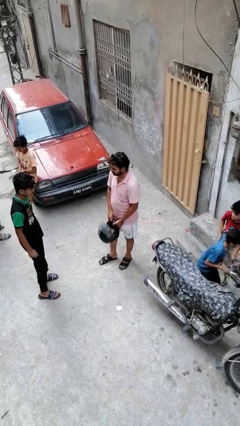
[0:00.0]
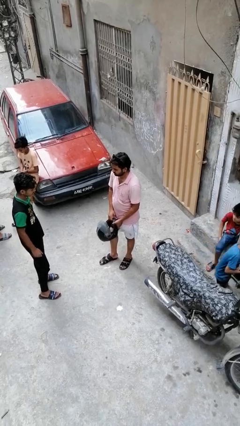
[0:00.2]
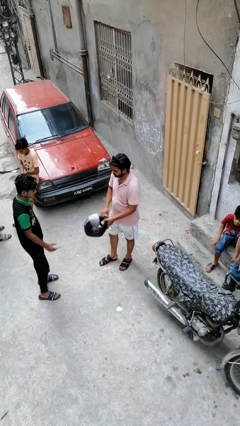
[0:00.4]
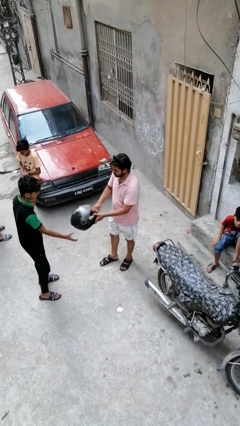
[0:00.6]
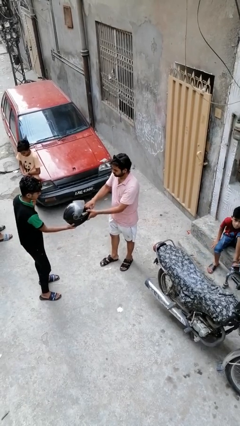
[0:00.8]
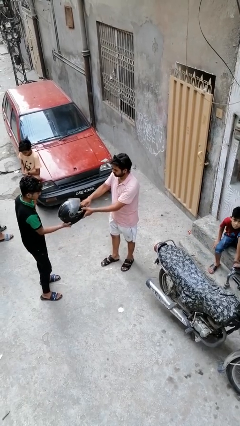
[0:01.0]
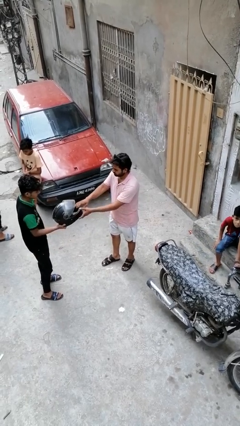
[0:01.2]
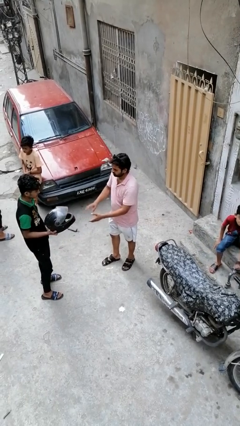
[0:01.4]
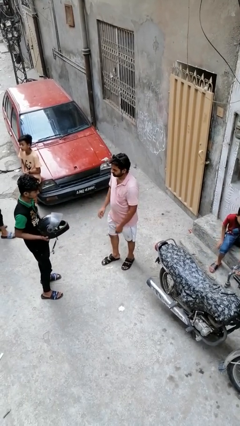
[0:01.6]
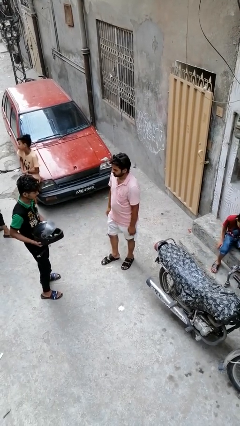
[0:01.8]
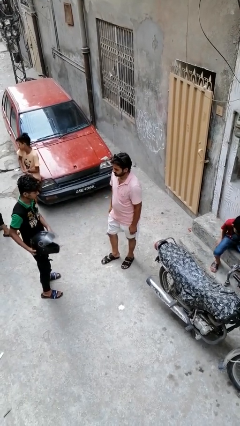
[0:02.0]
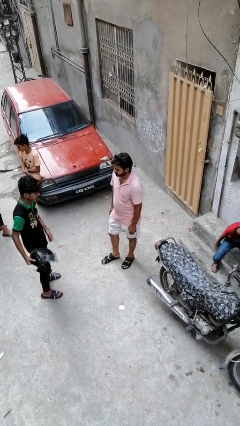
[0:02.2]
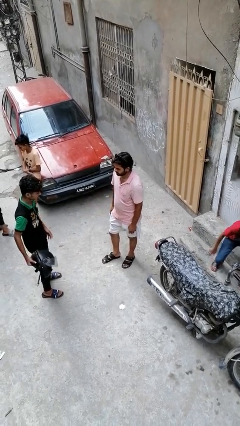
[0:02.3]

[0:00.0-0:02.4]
person transfers object to person

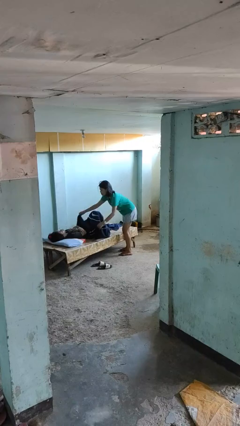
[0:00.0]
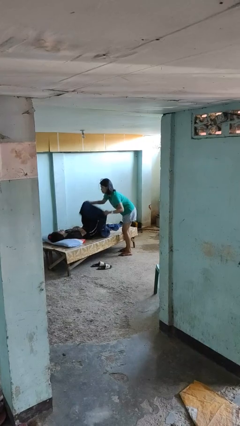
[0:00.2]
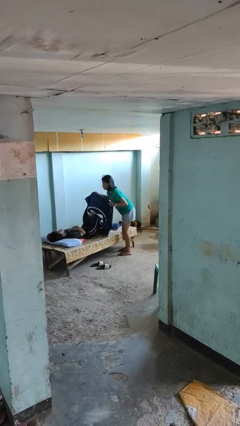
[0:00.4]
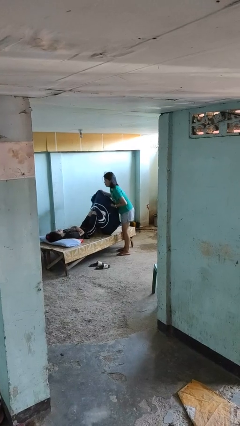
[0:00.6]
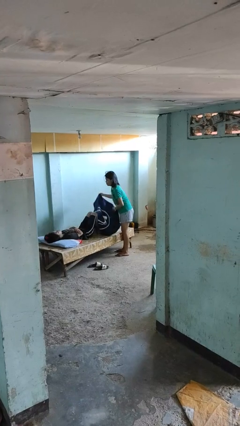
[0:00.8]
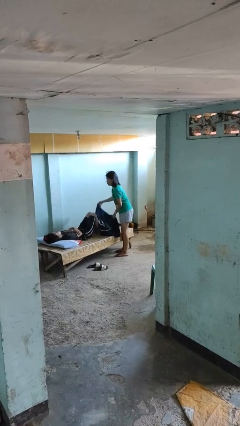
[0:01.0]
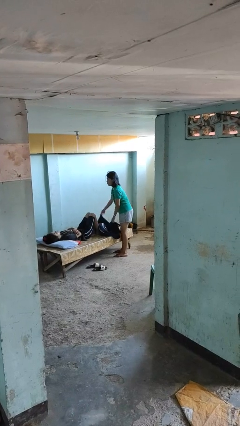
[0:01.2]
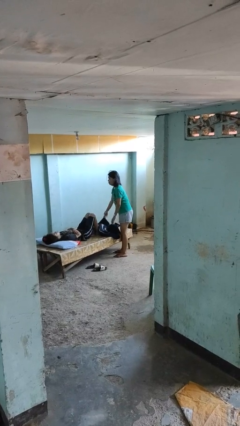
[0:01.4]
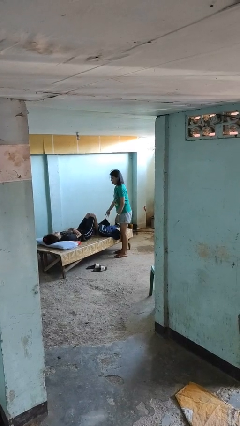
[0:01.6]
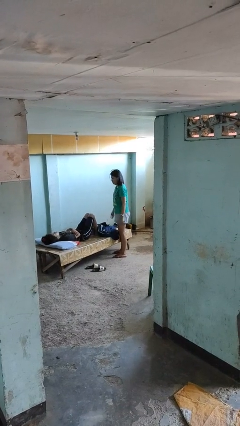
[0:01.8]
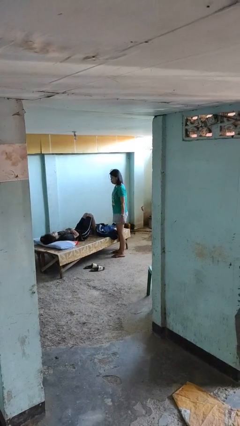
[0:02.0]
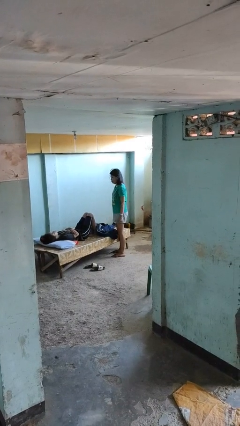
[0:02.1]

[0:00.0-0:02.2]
person uncovers friend with blanket

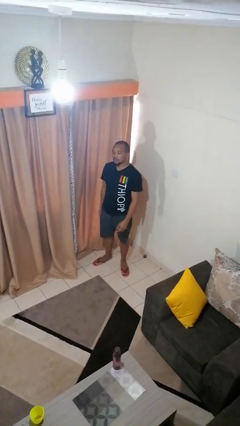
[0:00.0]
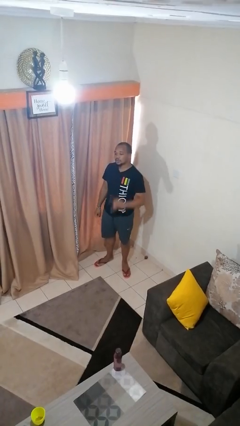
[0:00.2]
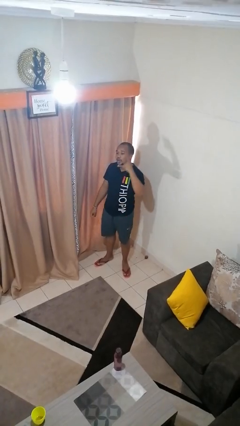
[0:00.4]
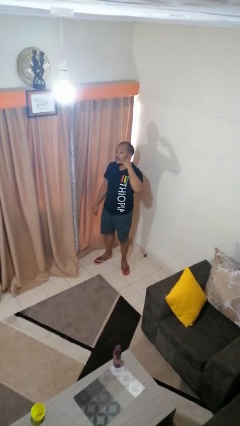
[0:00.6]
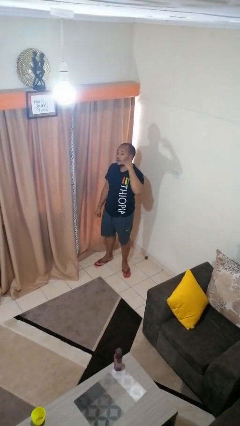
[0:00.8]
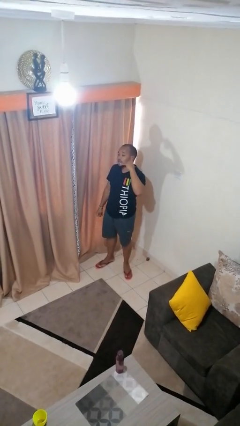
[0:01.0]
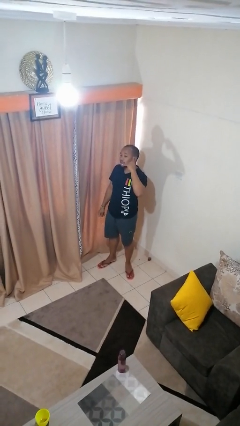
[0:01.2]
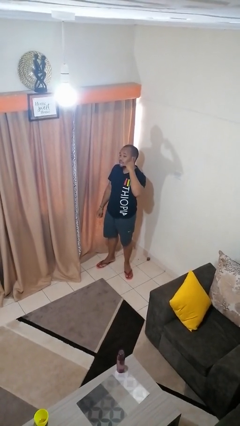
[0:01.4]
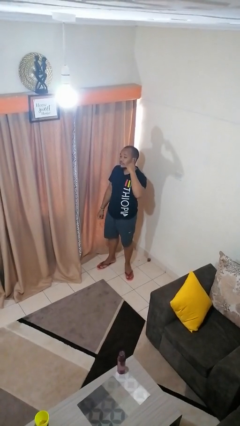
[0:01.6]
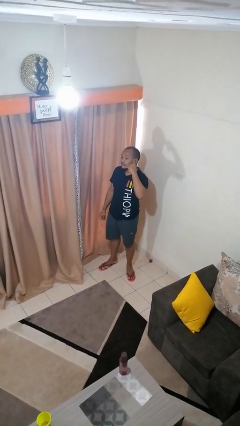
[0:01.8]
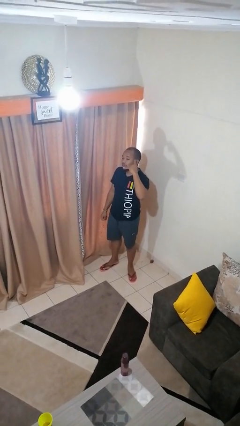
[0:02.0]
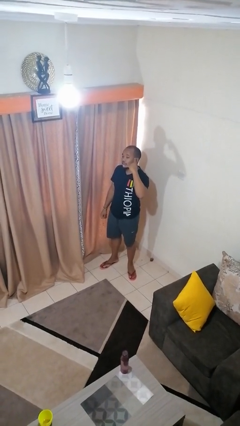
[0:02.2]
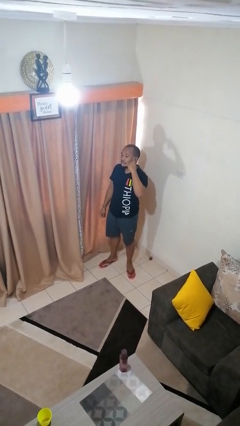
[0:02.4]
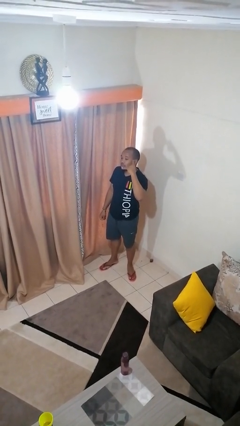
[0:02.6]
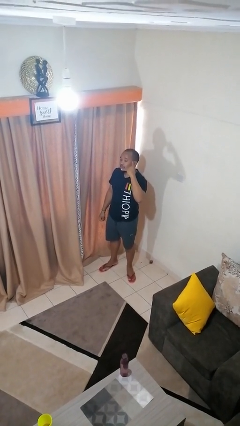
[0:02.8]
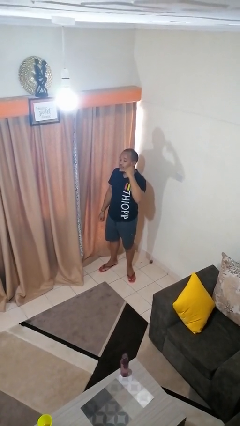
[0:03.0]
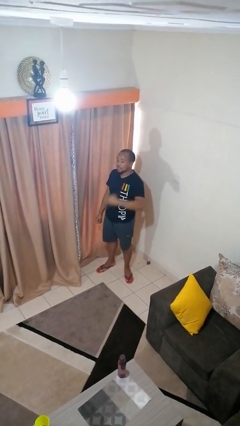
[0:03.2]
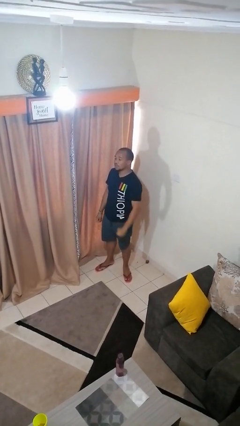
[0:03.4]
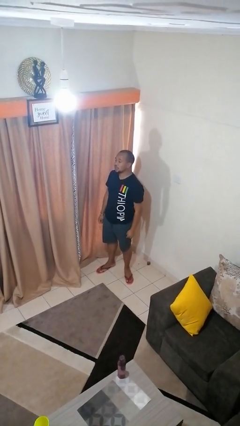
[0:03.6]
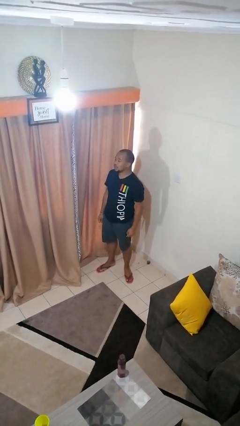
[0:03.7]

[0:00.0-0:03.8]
person gestures call me

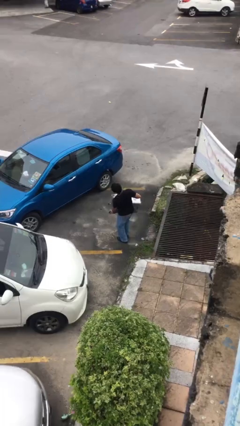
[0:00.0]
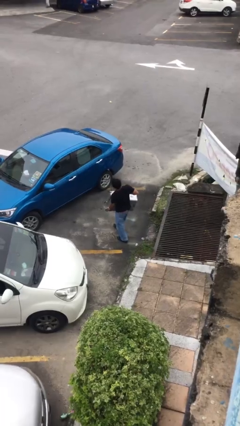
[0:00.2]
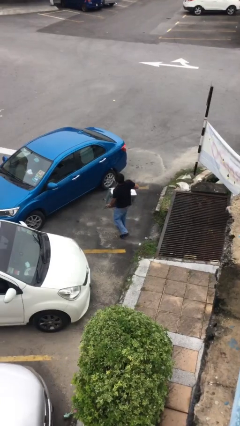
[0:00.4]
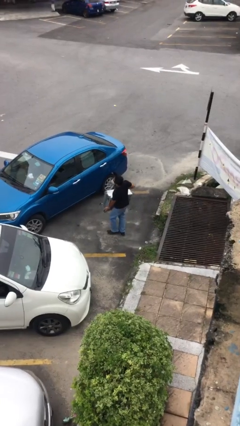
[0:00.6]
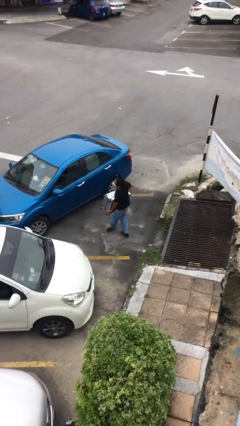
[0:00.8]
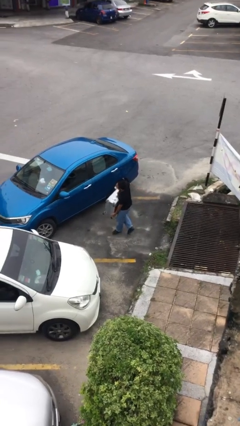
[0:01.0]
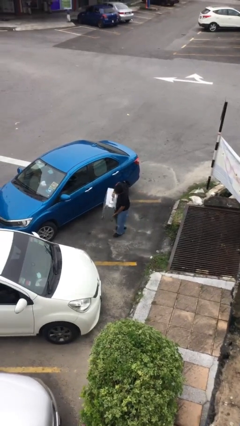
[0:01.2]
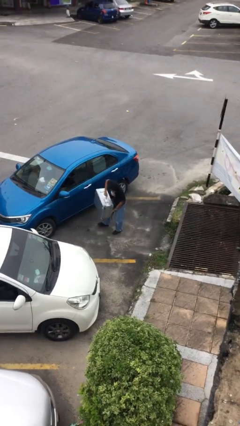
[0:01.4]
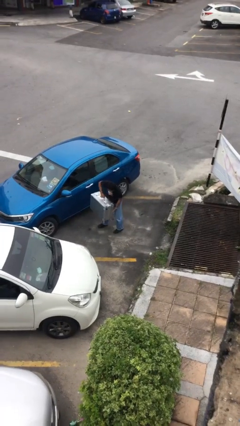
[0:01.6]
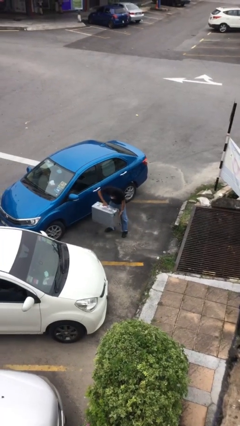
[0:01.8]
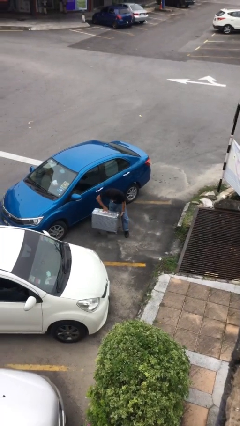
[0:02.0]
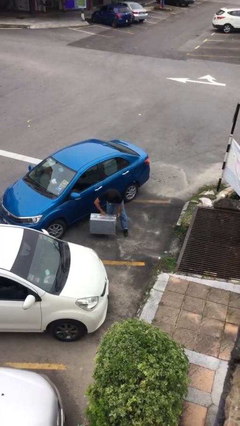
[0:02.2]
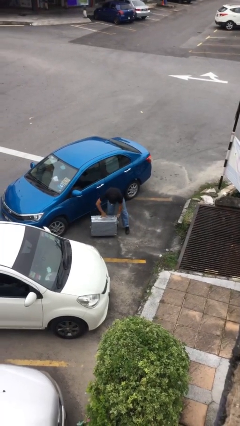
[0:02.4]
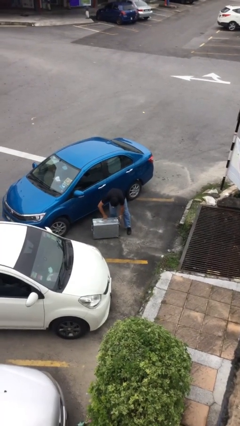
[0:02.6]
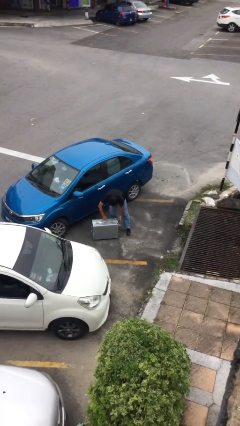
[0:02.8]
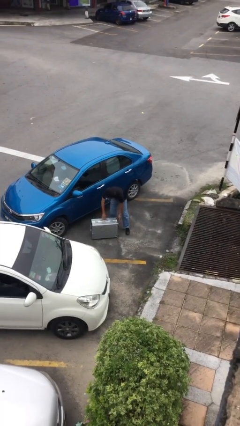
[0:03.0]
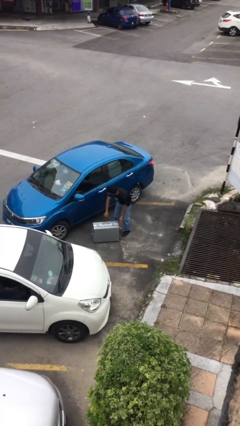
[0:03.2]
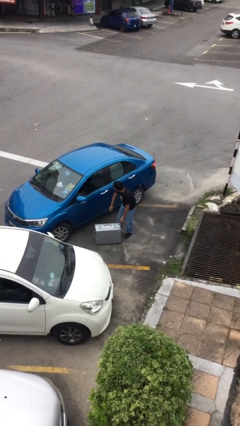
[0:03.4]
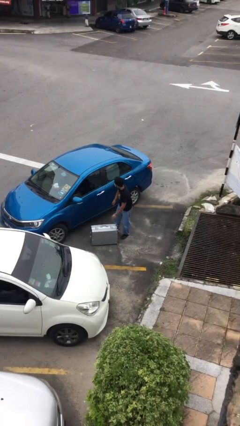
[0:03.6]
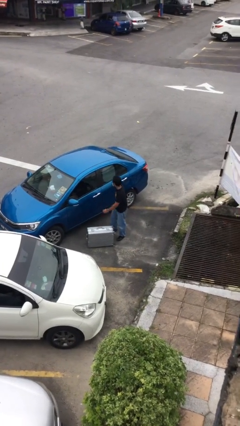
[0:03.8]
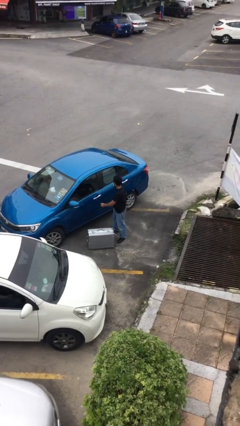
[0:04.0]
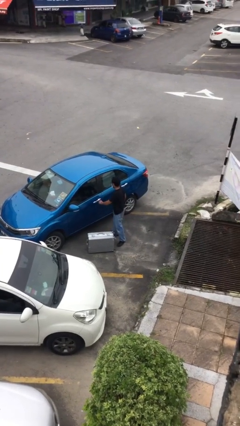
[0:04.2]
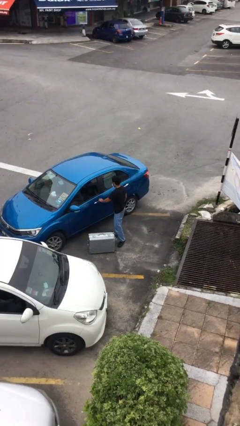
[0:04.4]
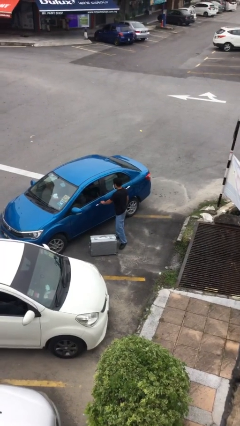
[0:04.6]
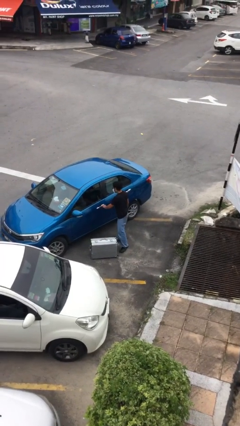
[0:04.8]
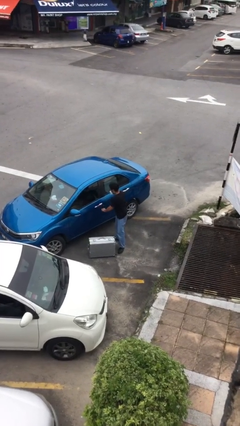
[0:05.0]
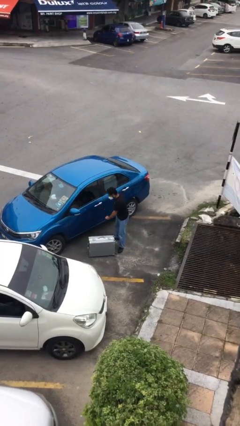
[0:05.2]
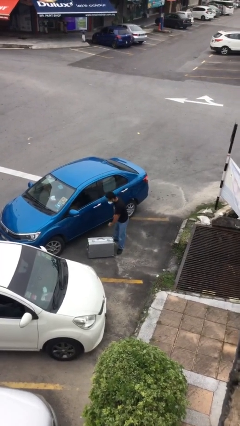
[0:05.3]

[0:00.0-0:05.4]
person puts down object on floor

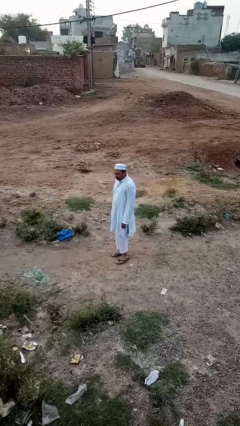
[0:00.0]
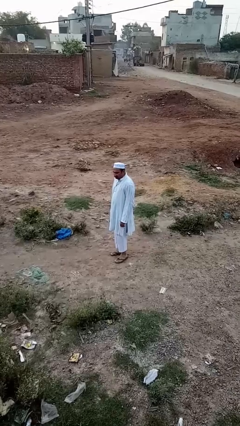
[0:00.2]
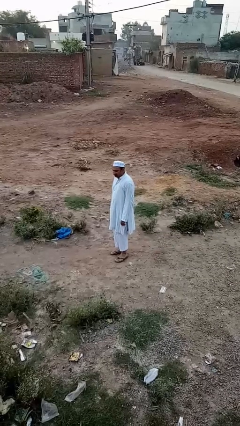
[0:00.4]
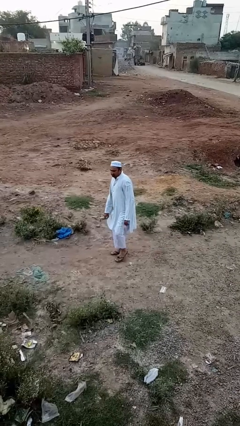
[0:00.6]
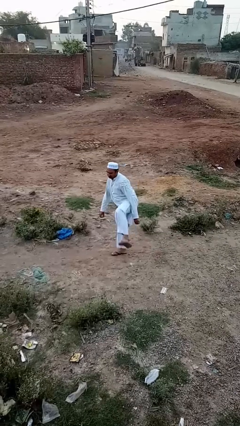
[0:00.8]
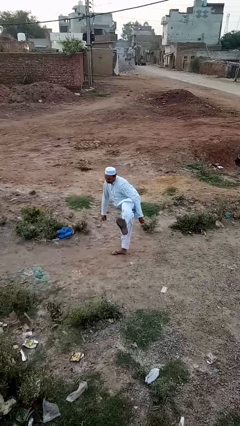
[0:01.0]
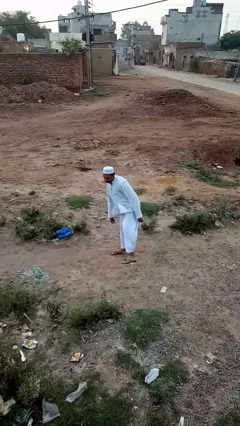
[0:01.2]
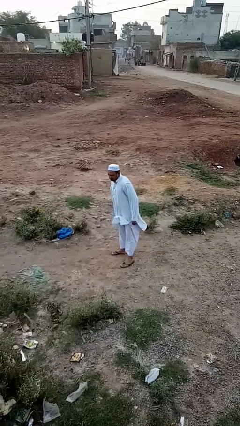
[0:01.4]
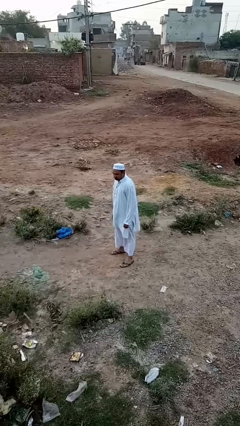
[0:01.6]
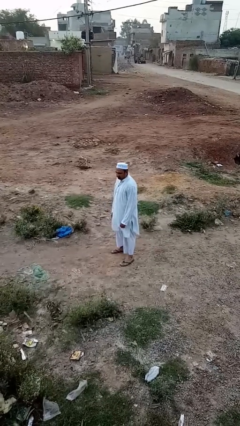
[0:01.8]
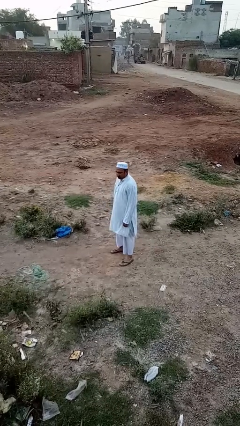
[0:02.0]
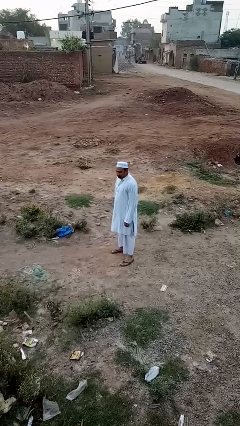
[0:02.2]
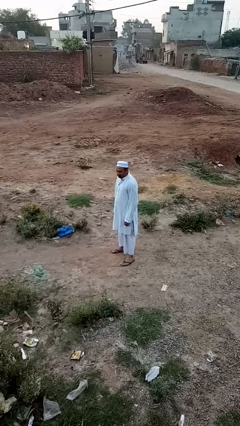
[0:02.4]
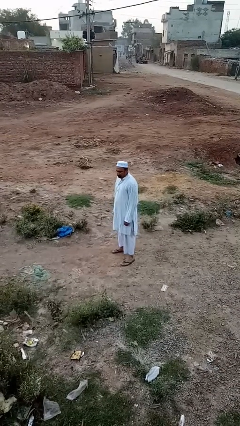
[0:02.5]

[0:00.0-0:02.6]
person karate kicks

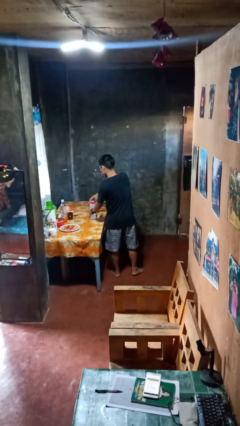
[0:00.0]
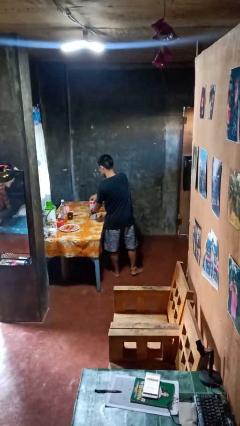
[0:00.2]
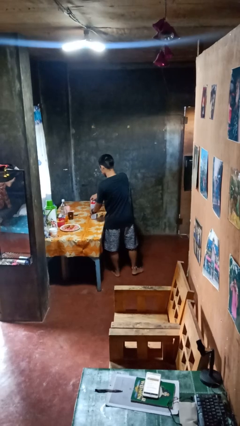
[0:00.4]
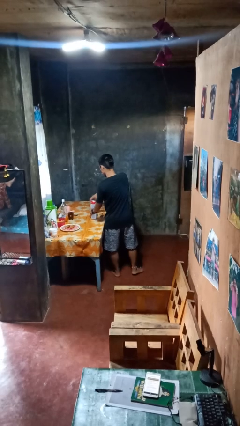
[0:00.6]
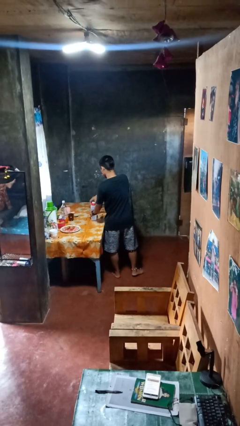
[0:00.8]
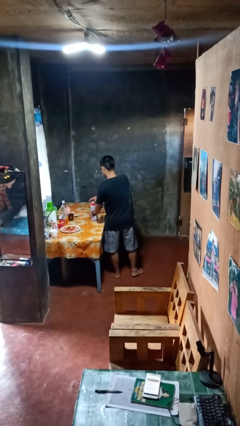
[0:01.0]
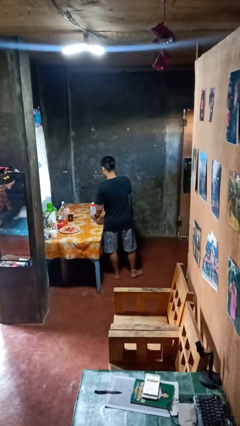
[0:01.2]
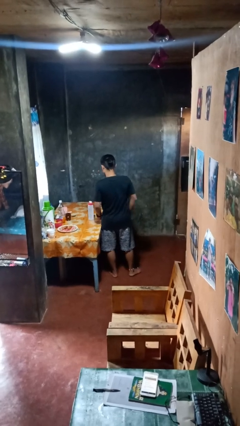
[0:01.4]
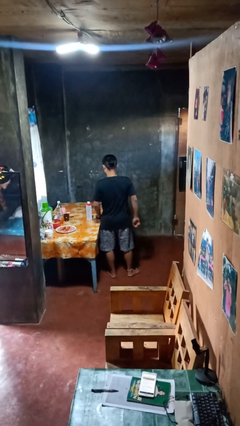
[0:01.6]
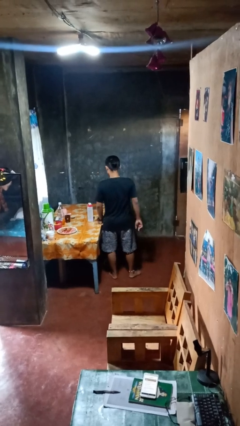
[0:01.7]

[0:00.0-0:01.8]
person closes jar
